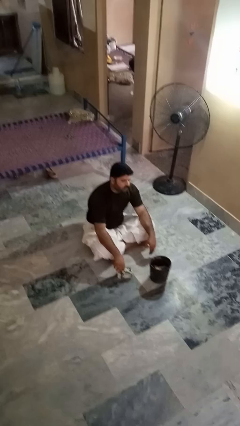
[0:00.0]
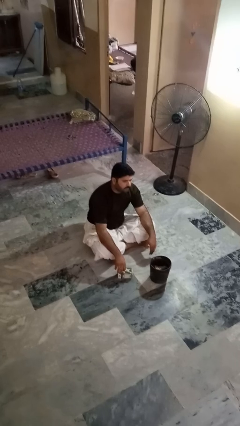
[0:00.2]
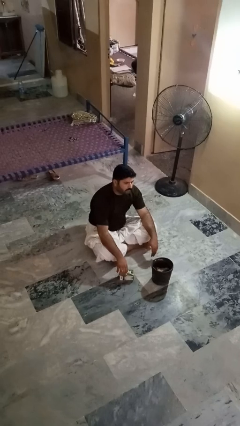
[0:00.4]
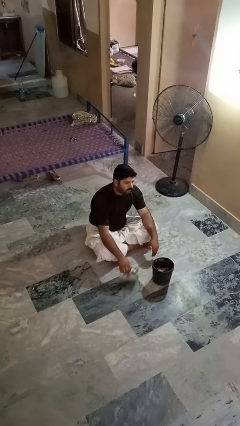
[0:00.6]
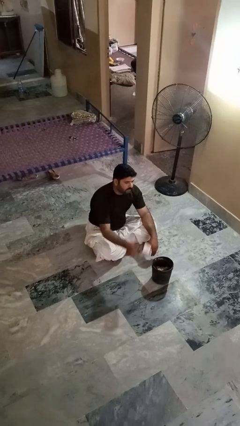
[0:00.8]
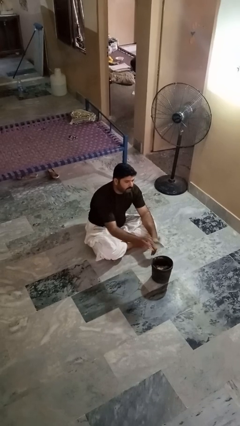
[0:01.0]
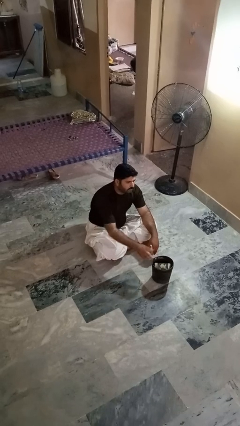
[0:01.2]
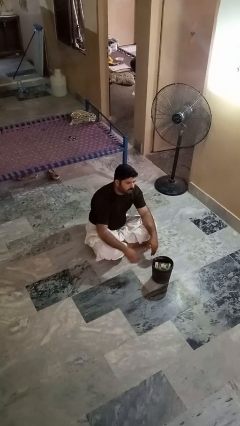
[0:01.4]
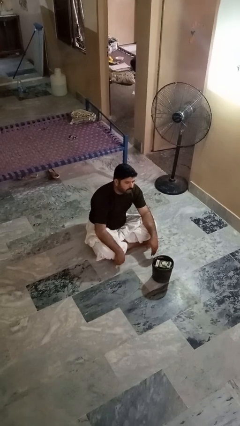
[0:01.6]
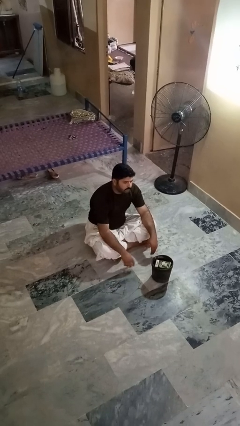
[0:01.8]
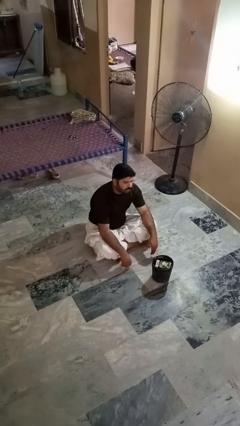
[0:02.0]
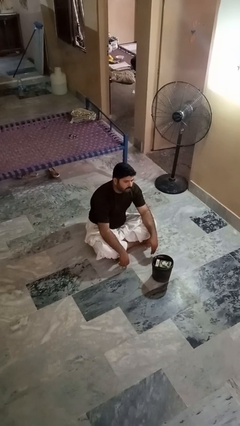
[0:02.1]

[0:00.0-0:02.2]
person puts object into basket

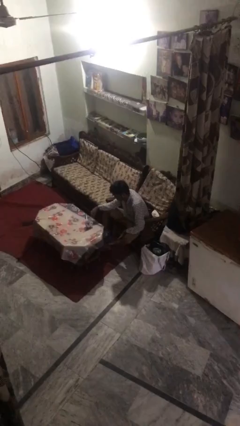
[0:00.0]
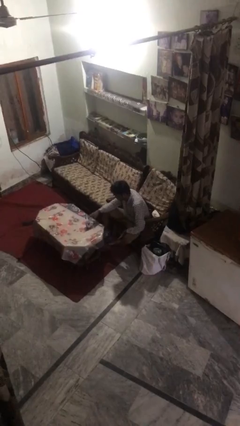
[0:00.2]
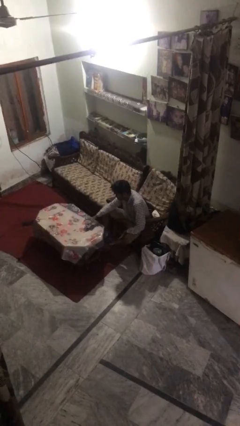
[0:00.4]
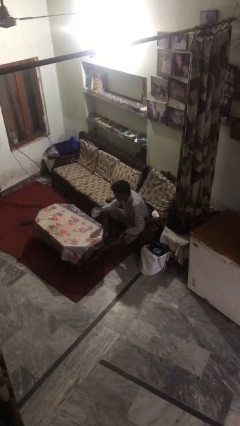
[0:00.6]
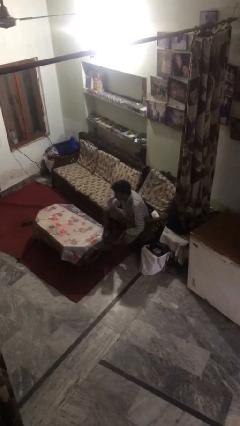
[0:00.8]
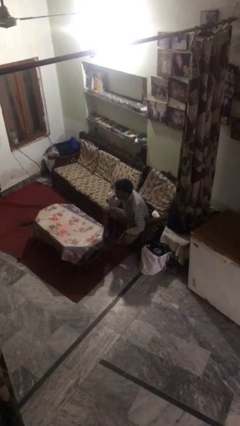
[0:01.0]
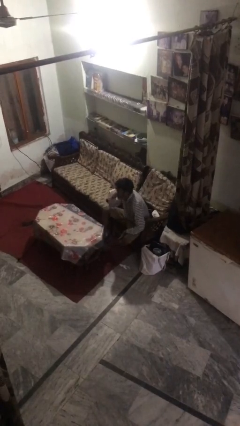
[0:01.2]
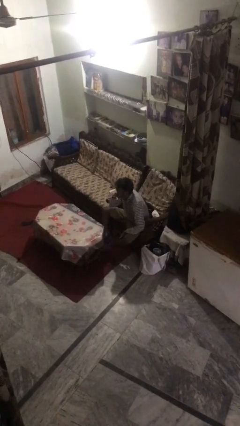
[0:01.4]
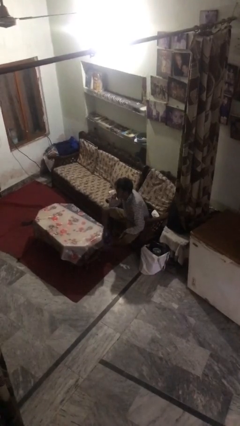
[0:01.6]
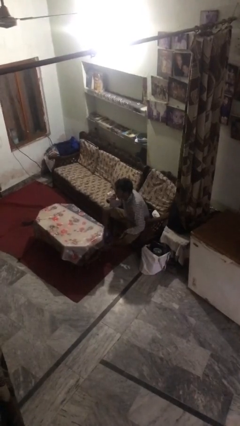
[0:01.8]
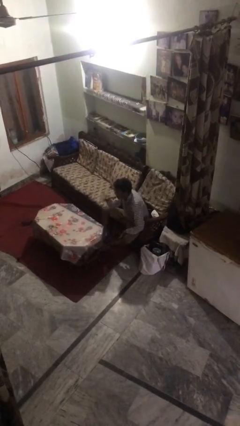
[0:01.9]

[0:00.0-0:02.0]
person drinks from mug

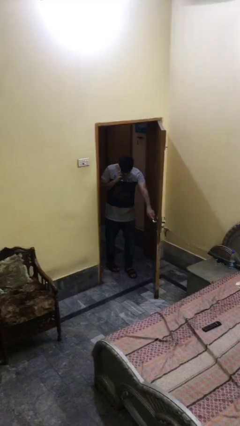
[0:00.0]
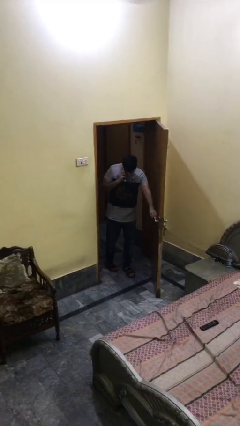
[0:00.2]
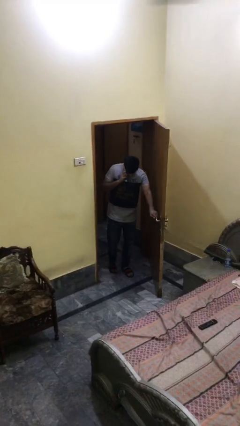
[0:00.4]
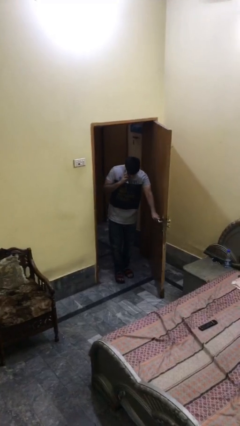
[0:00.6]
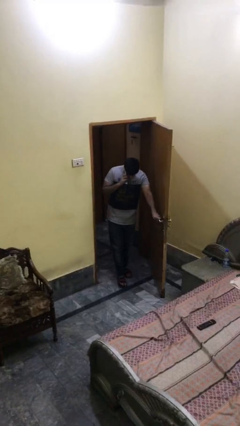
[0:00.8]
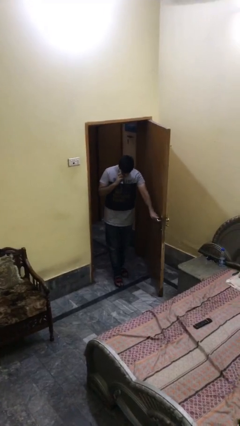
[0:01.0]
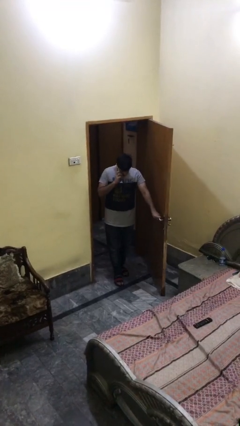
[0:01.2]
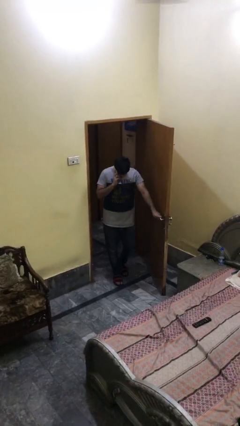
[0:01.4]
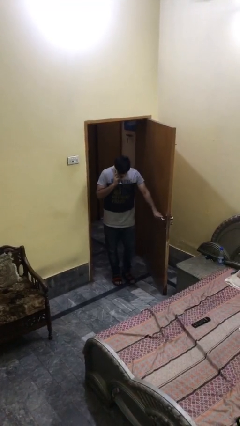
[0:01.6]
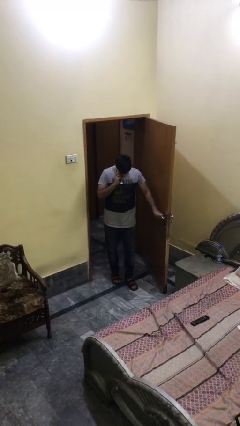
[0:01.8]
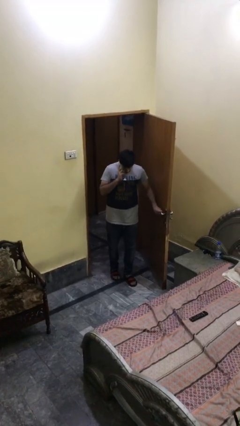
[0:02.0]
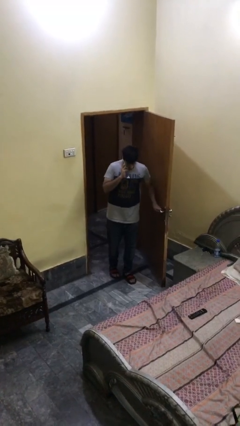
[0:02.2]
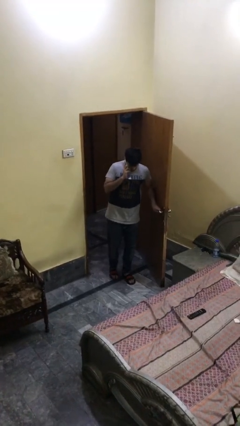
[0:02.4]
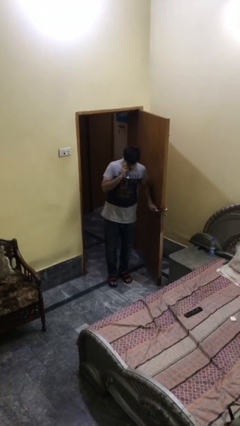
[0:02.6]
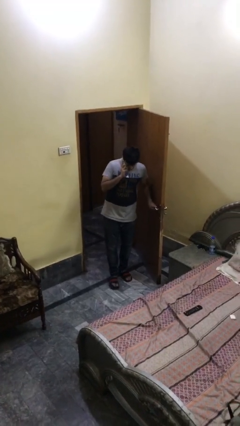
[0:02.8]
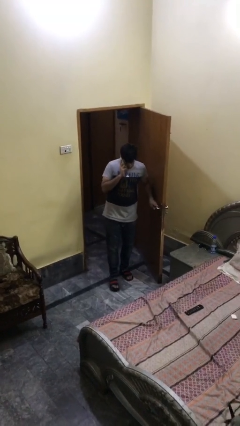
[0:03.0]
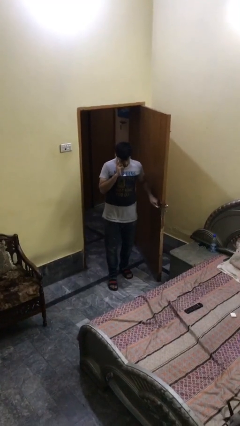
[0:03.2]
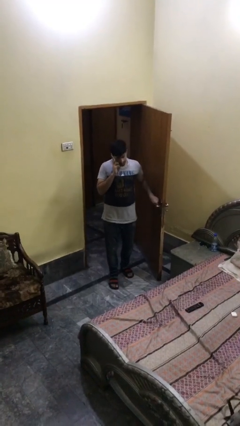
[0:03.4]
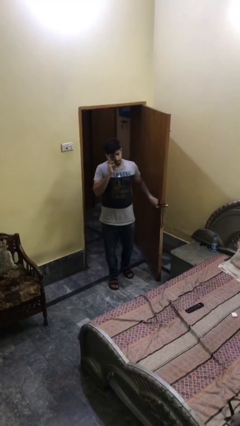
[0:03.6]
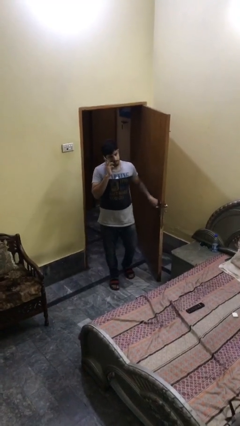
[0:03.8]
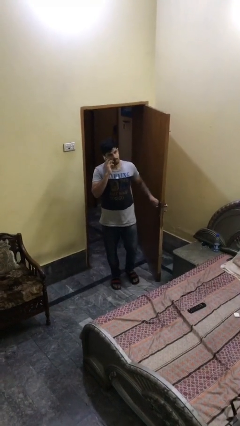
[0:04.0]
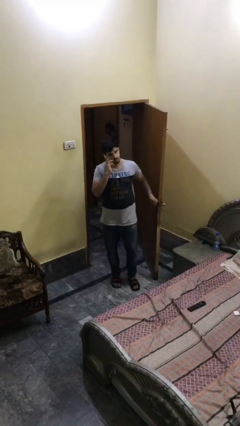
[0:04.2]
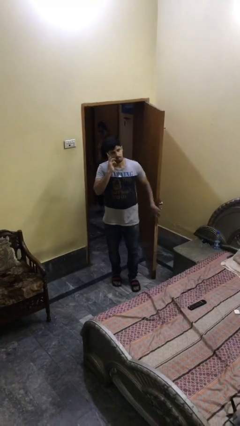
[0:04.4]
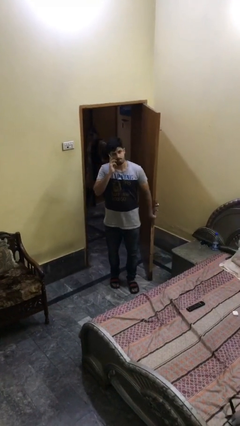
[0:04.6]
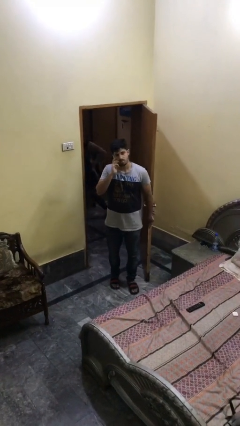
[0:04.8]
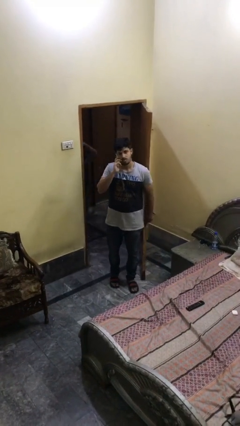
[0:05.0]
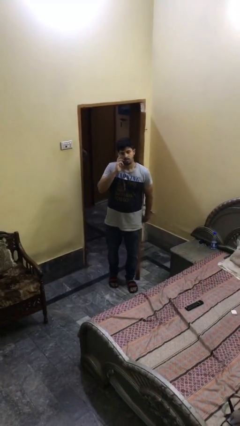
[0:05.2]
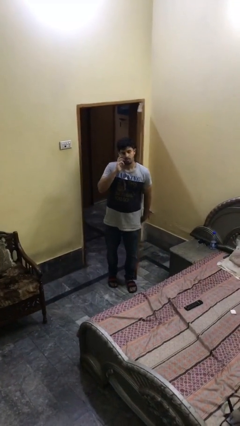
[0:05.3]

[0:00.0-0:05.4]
person enters scene through structure

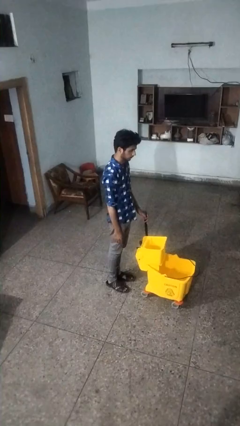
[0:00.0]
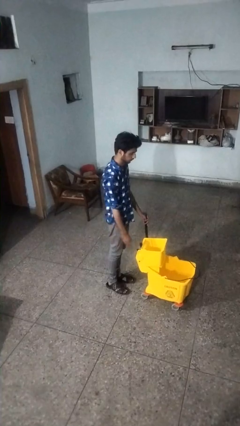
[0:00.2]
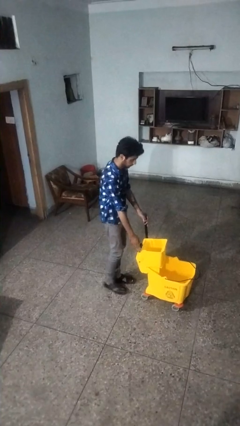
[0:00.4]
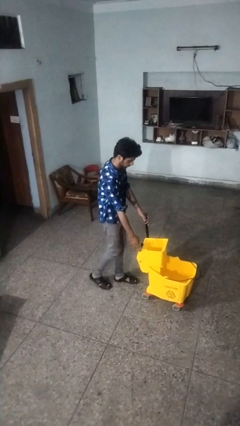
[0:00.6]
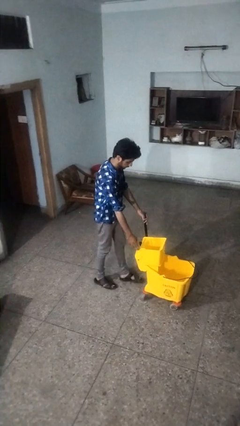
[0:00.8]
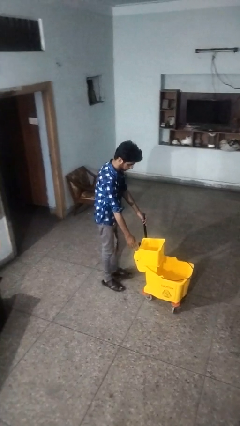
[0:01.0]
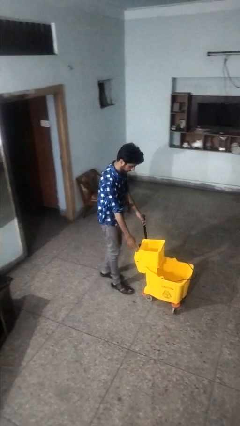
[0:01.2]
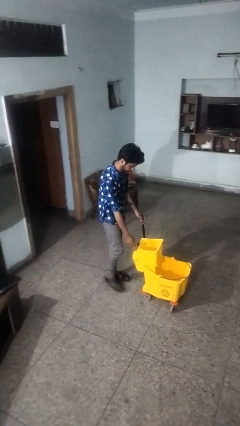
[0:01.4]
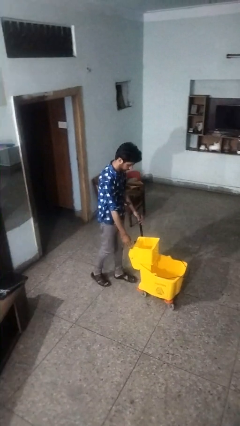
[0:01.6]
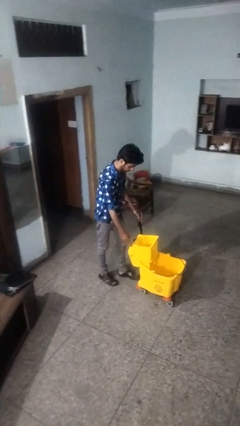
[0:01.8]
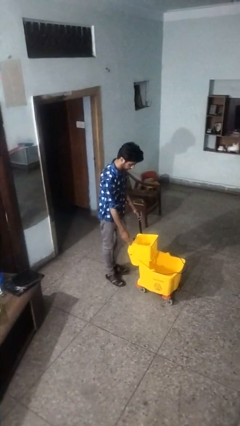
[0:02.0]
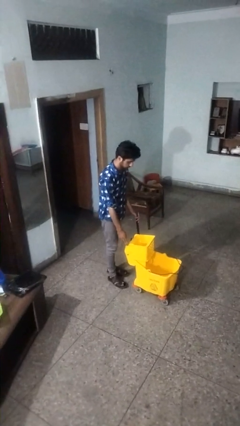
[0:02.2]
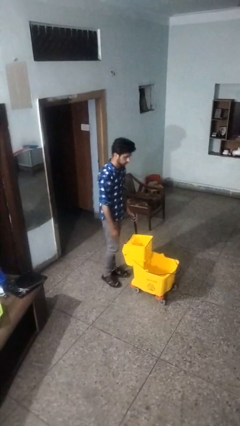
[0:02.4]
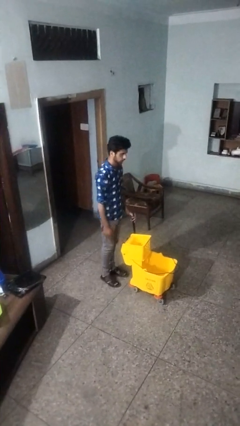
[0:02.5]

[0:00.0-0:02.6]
person pulls wheeled cart

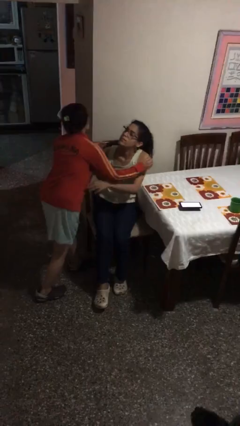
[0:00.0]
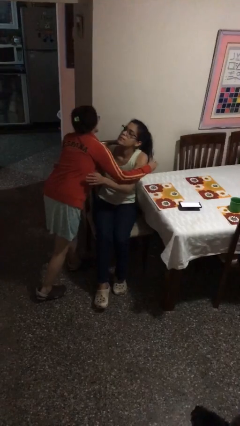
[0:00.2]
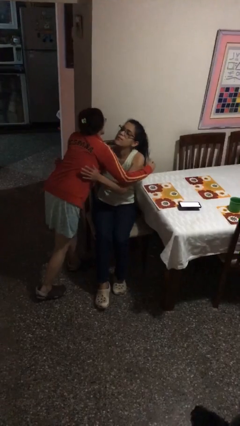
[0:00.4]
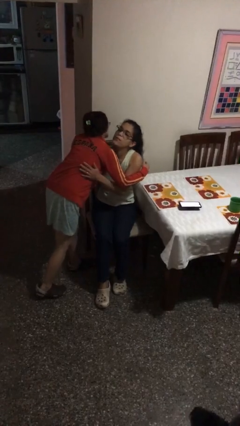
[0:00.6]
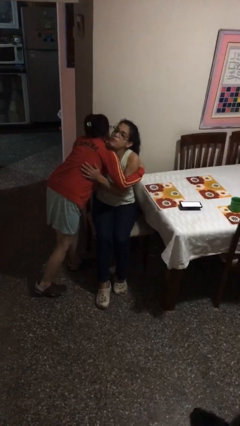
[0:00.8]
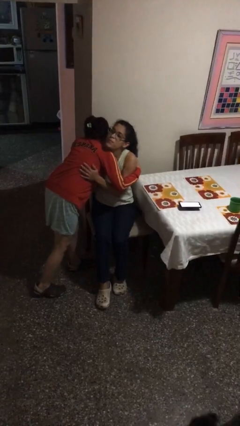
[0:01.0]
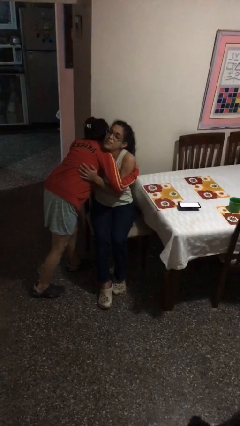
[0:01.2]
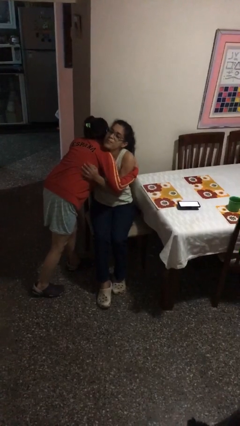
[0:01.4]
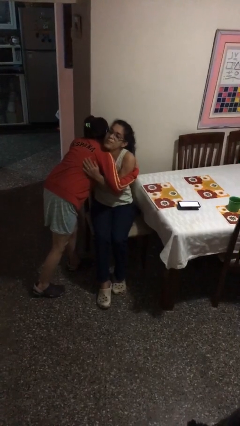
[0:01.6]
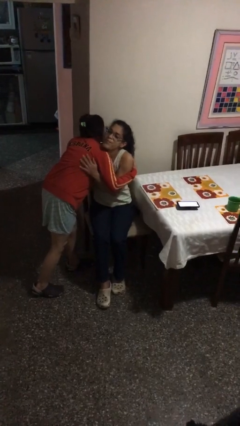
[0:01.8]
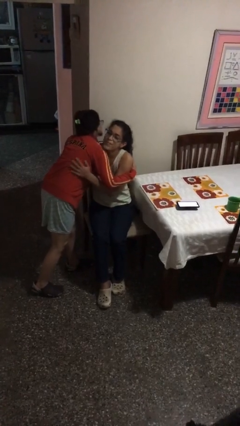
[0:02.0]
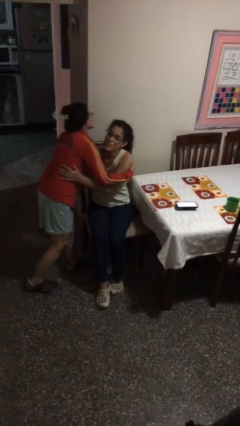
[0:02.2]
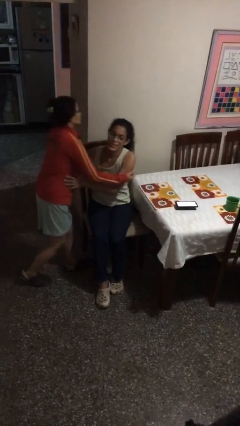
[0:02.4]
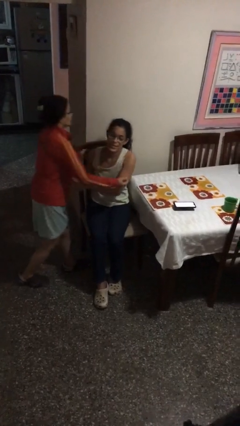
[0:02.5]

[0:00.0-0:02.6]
person embraces person

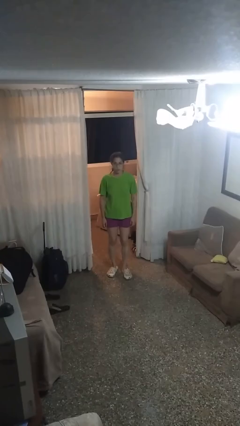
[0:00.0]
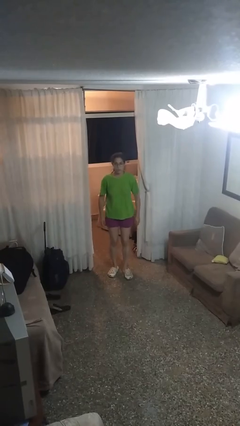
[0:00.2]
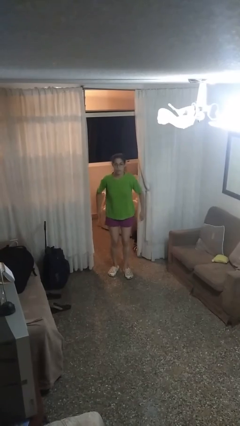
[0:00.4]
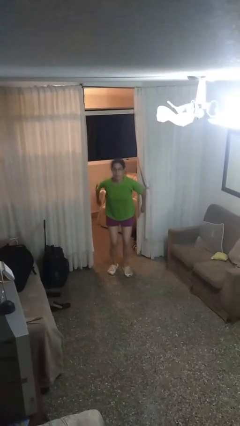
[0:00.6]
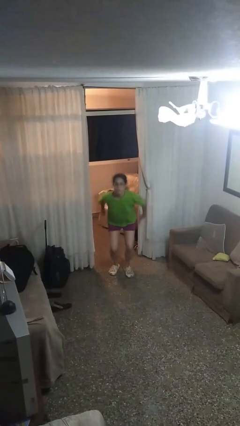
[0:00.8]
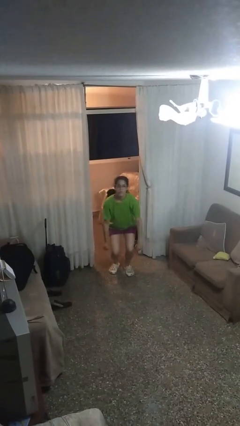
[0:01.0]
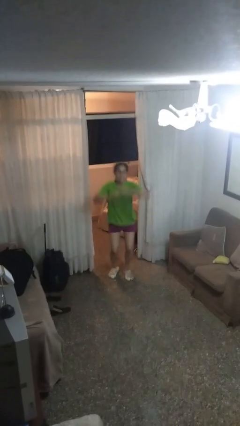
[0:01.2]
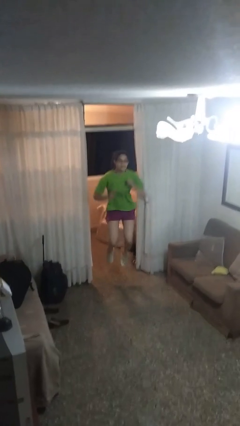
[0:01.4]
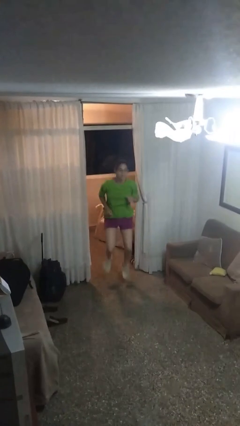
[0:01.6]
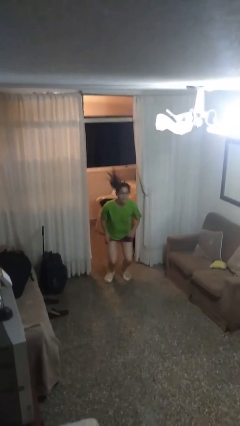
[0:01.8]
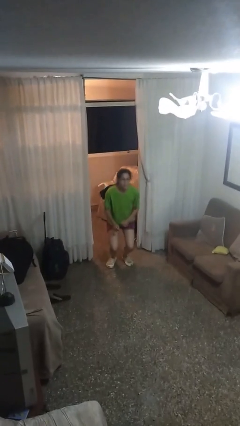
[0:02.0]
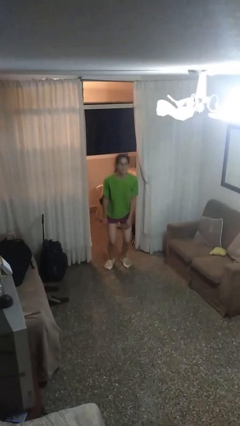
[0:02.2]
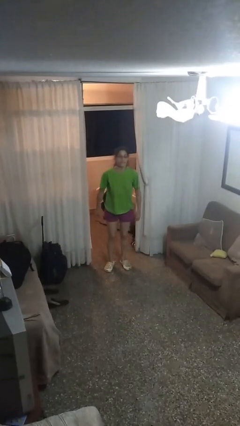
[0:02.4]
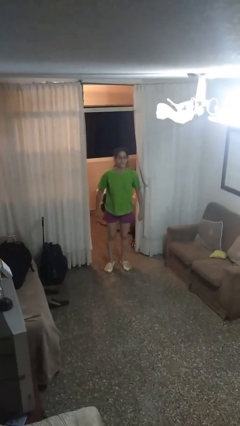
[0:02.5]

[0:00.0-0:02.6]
person jumps

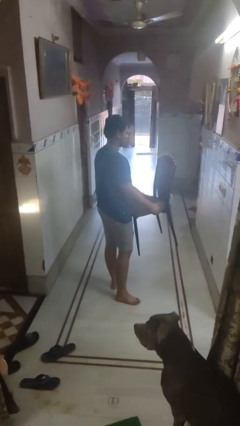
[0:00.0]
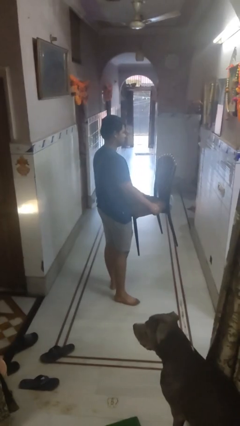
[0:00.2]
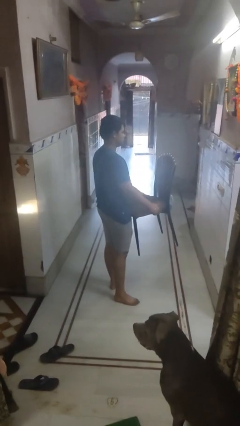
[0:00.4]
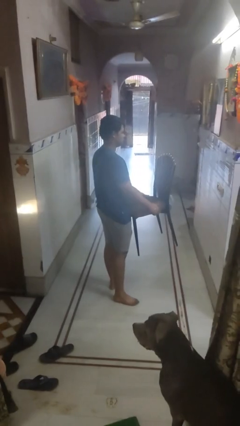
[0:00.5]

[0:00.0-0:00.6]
person carries furniture
